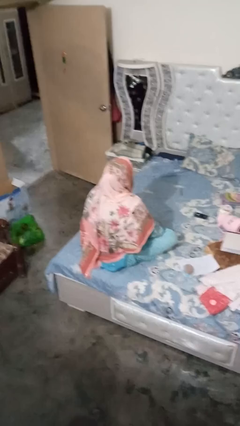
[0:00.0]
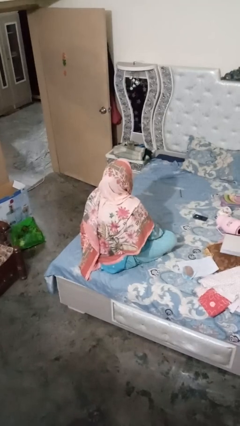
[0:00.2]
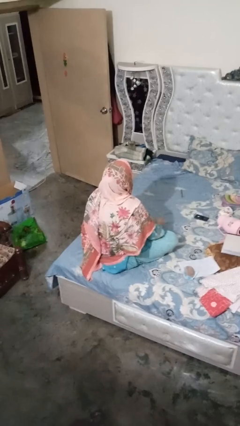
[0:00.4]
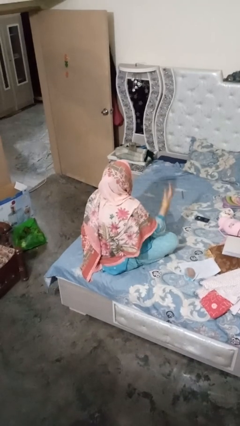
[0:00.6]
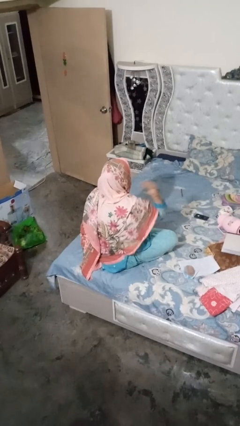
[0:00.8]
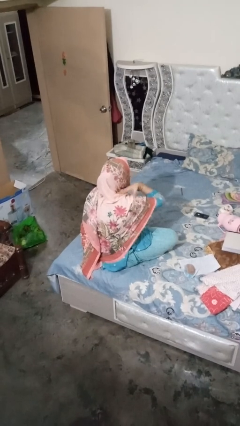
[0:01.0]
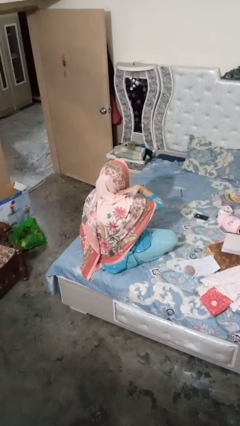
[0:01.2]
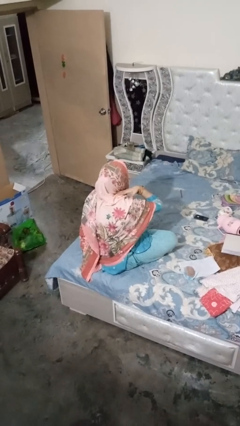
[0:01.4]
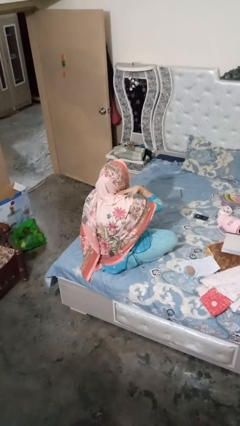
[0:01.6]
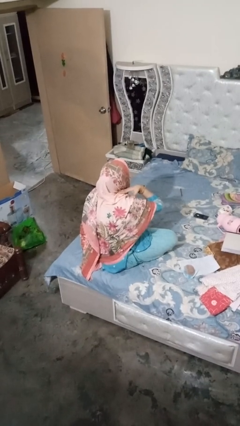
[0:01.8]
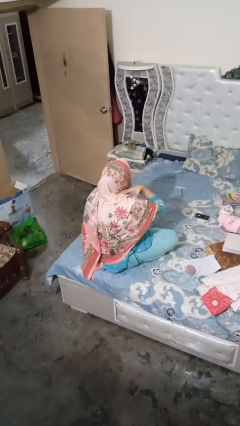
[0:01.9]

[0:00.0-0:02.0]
person gestures cut

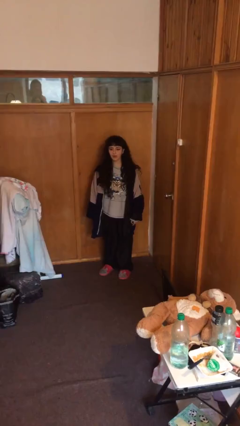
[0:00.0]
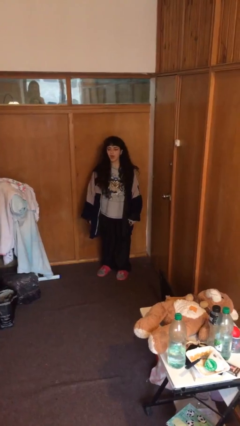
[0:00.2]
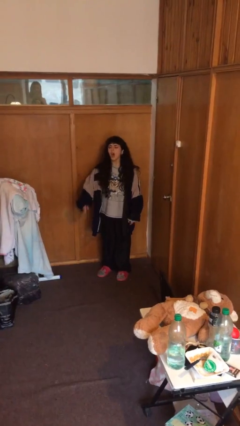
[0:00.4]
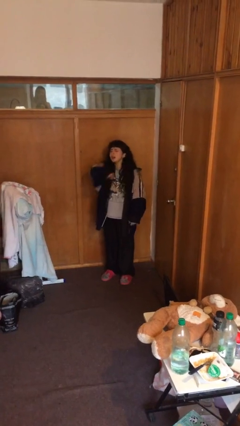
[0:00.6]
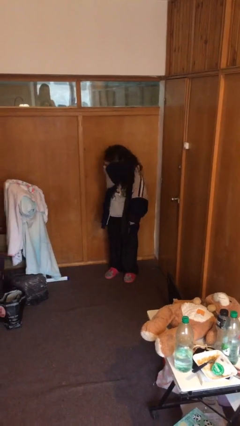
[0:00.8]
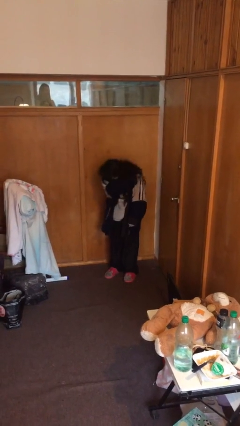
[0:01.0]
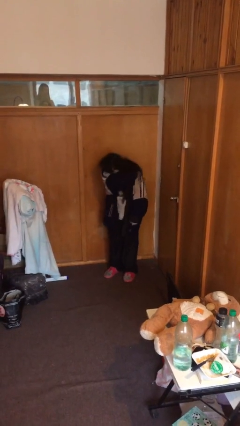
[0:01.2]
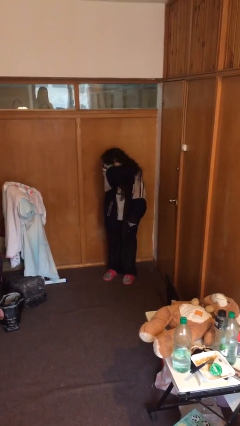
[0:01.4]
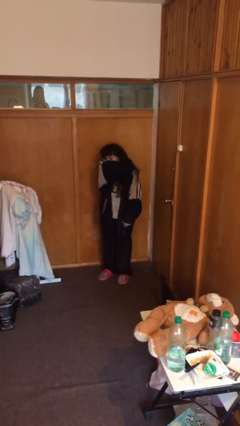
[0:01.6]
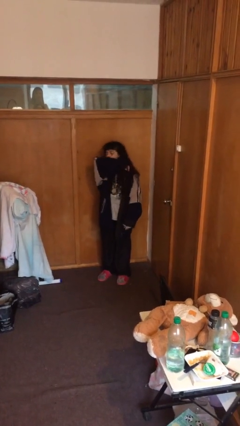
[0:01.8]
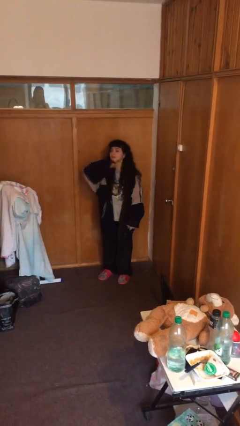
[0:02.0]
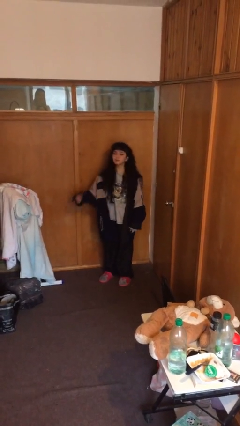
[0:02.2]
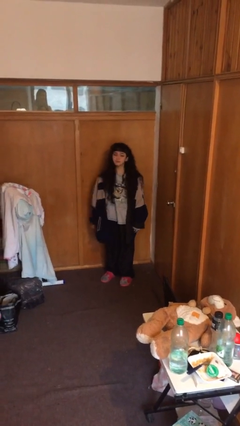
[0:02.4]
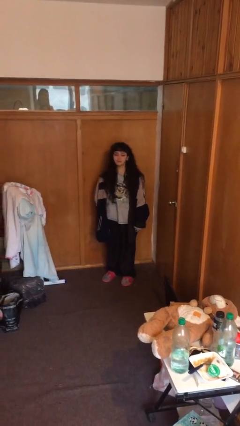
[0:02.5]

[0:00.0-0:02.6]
person sneezes into arm

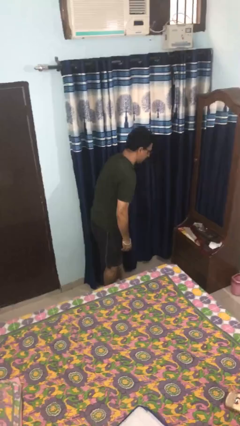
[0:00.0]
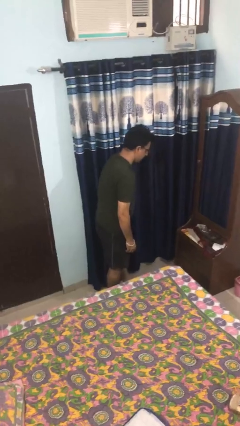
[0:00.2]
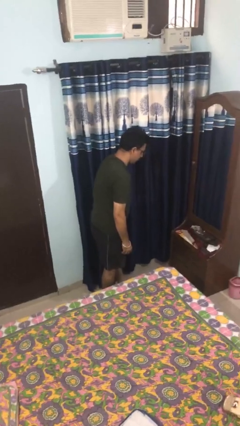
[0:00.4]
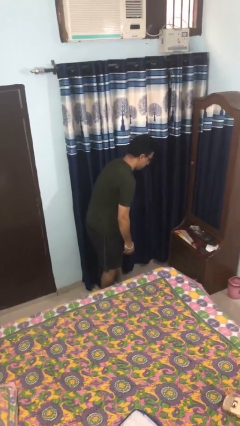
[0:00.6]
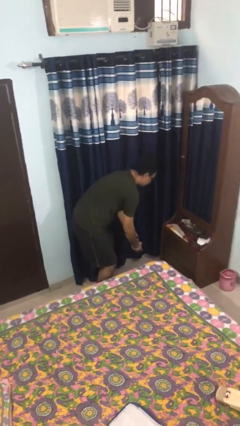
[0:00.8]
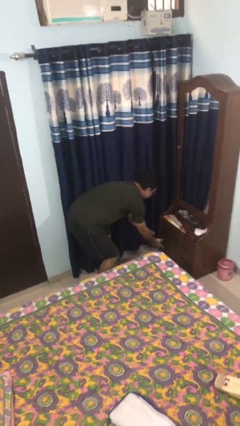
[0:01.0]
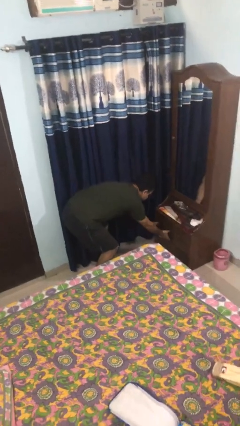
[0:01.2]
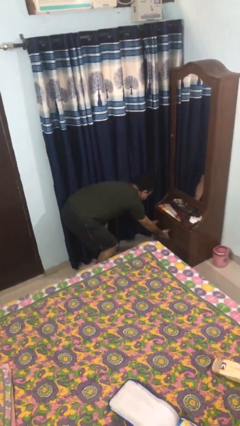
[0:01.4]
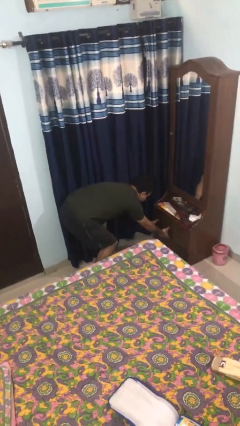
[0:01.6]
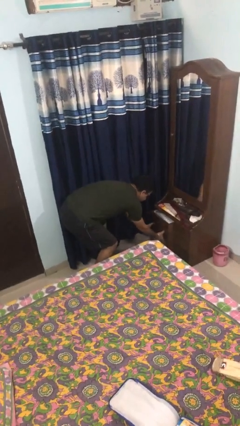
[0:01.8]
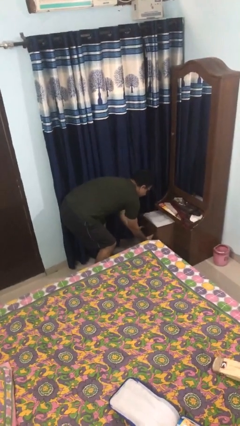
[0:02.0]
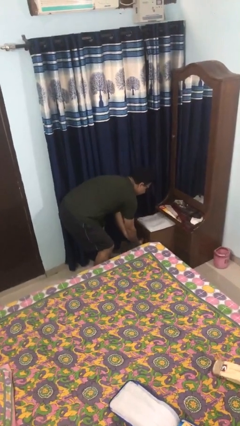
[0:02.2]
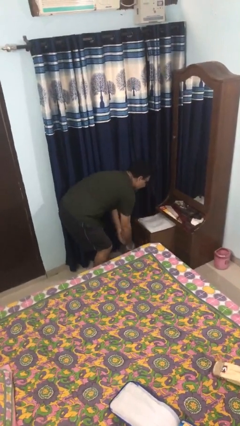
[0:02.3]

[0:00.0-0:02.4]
person opens dresser drawer

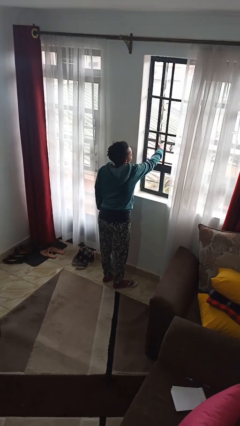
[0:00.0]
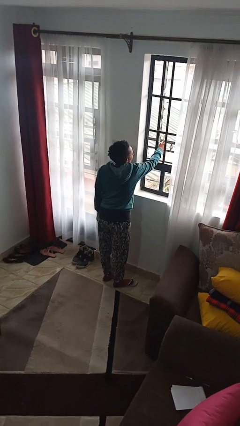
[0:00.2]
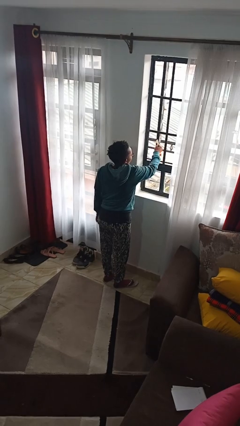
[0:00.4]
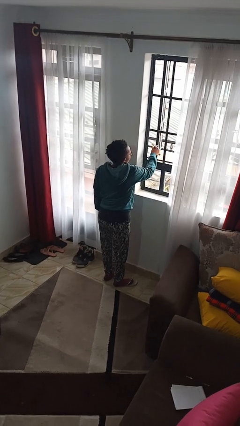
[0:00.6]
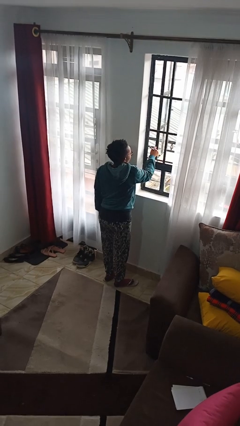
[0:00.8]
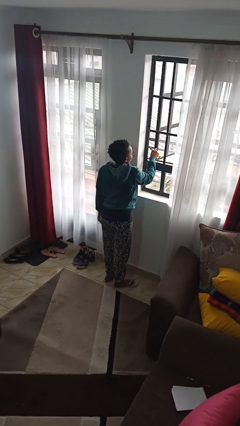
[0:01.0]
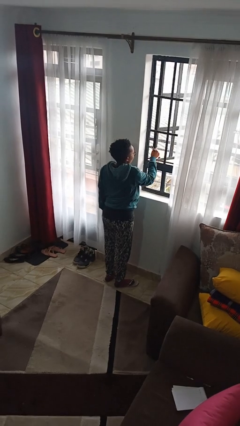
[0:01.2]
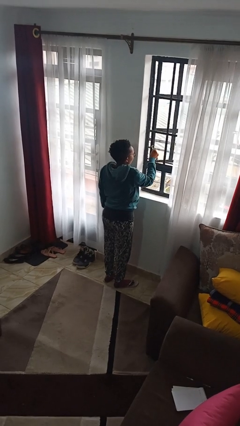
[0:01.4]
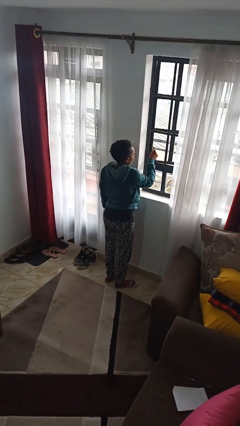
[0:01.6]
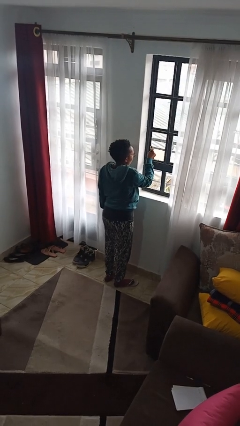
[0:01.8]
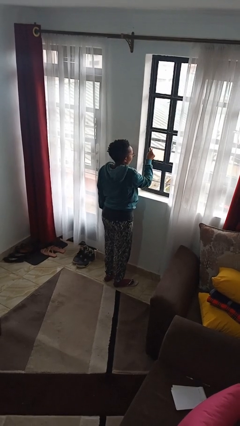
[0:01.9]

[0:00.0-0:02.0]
person closes home window

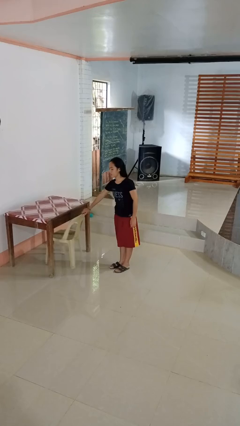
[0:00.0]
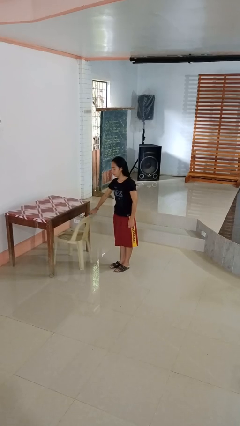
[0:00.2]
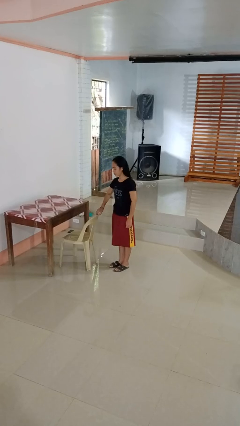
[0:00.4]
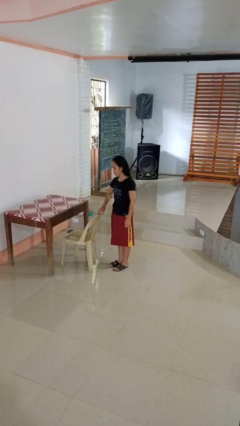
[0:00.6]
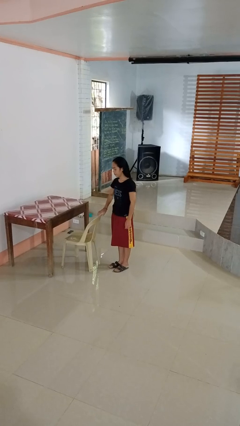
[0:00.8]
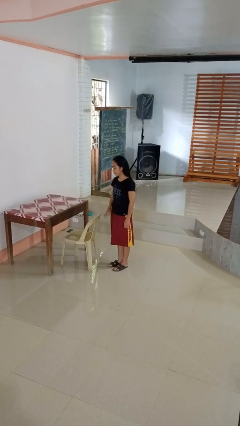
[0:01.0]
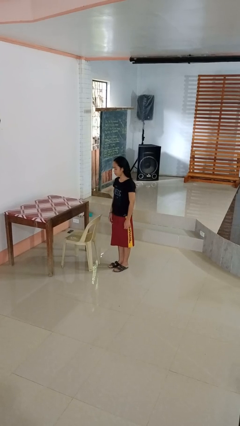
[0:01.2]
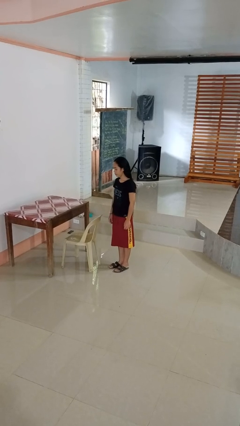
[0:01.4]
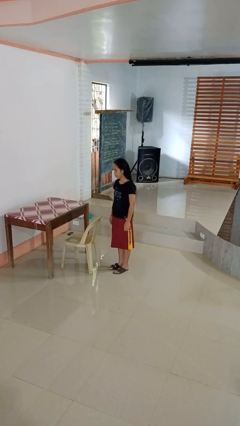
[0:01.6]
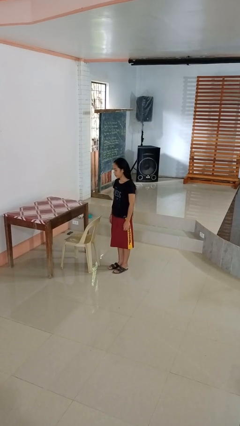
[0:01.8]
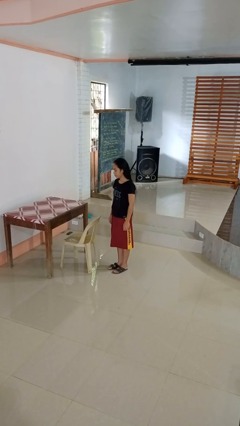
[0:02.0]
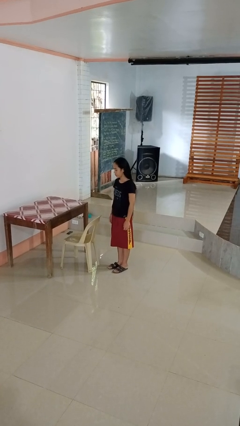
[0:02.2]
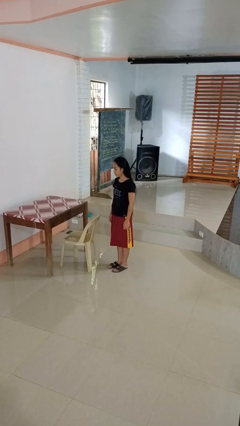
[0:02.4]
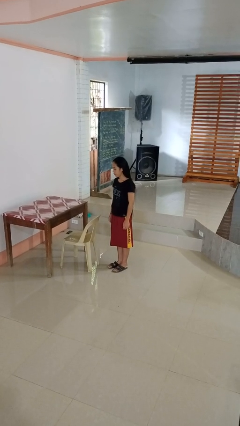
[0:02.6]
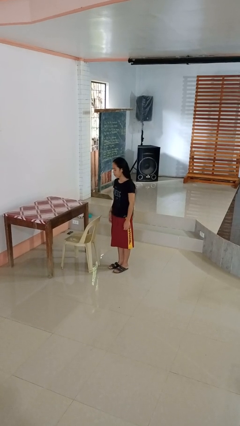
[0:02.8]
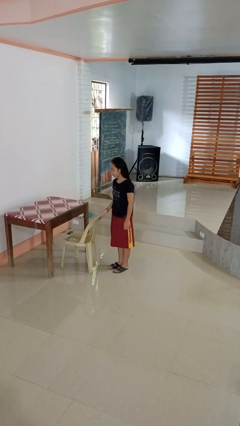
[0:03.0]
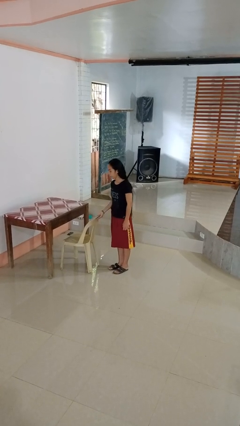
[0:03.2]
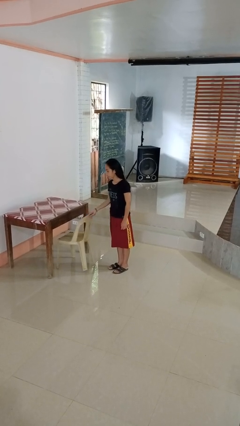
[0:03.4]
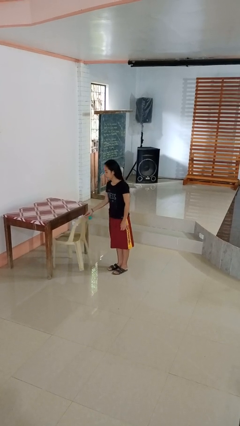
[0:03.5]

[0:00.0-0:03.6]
person pulls out chair

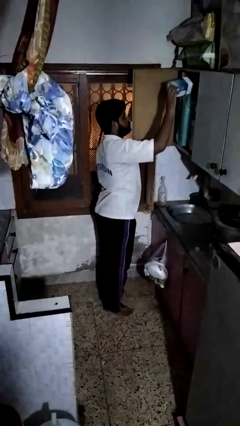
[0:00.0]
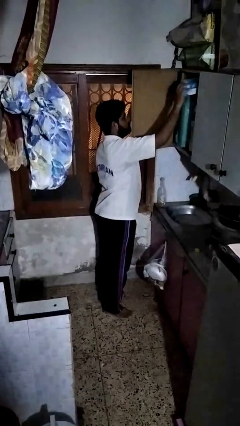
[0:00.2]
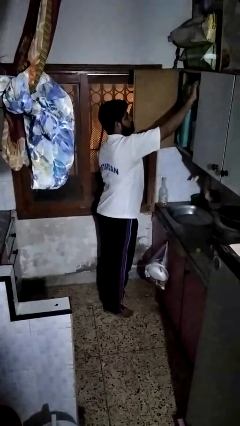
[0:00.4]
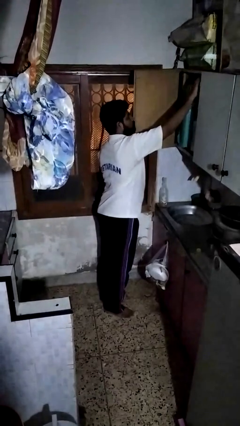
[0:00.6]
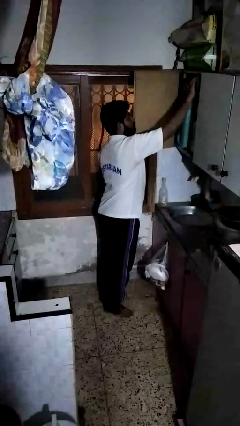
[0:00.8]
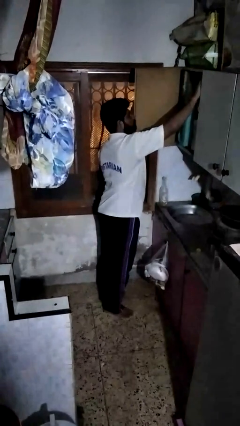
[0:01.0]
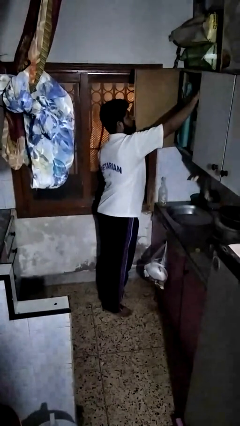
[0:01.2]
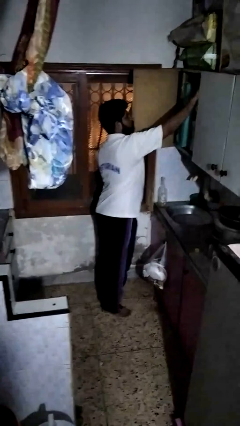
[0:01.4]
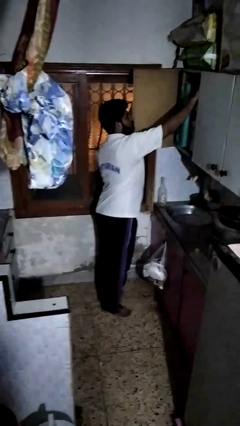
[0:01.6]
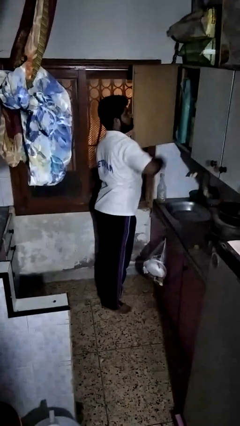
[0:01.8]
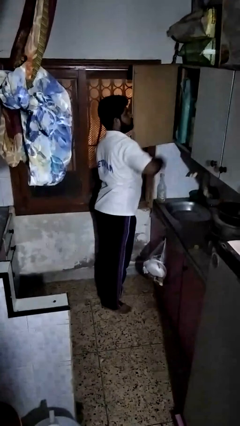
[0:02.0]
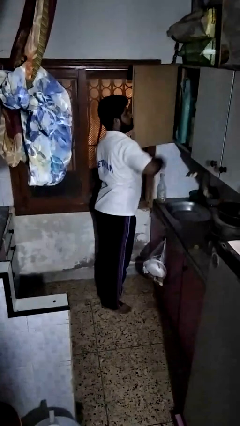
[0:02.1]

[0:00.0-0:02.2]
person puts down object into cabinet

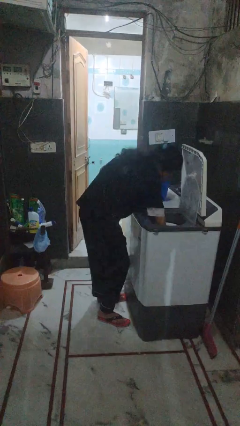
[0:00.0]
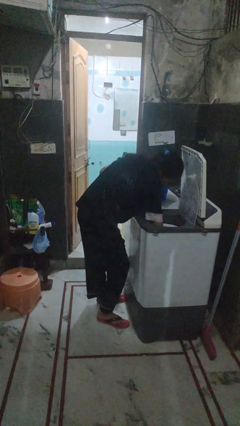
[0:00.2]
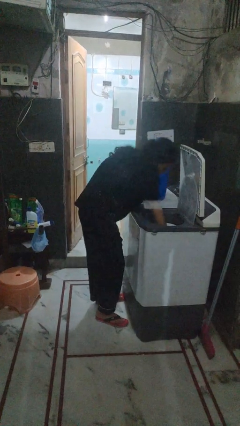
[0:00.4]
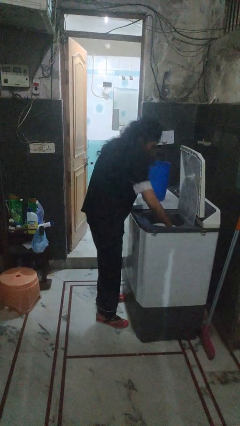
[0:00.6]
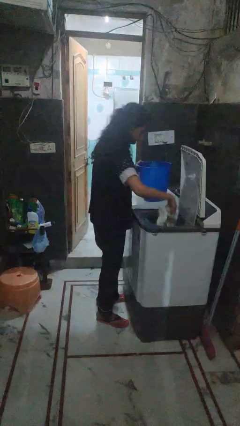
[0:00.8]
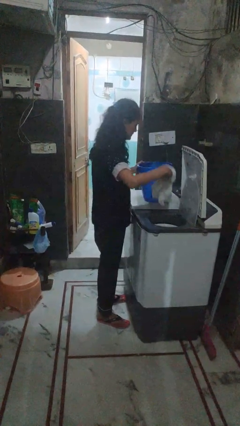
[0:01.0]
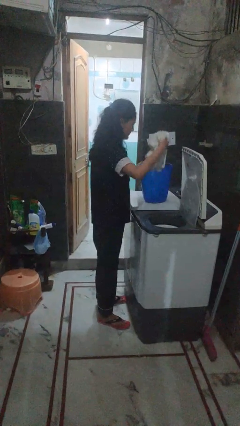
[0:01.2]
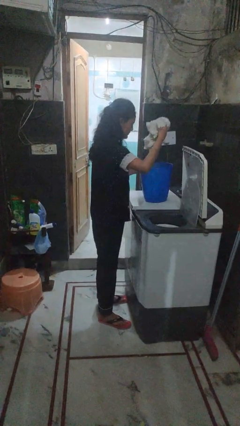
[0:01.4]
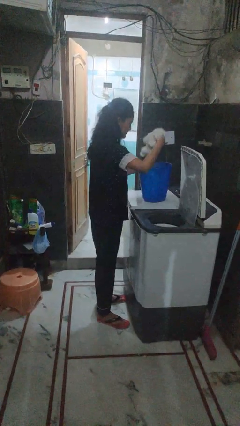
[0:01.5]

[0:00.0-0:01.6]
person unloads dryer

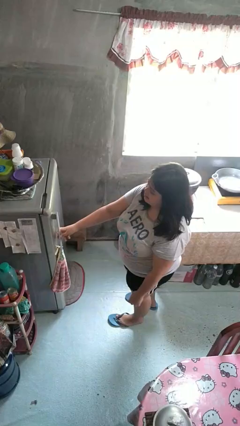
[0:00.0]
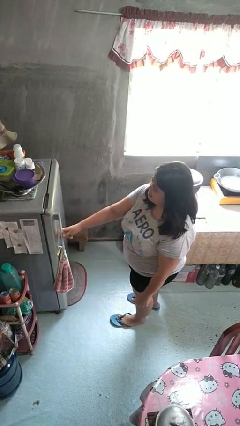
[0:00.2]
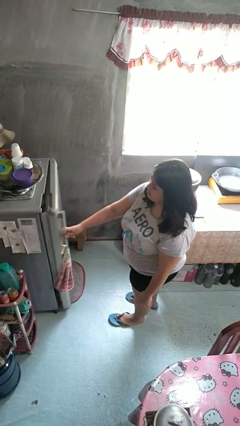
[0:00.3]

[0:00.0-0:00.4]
person opens refrigerator
